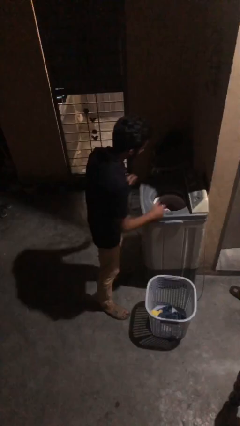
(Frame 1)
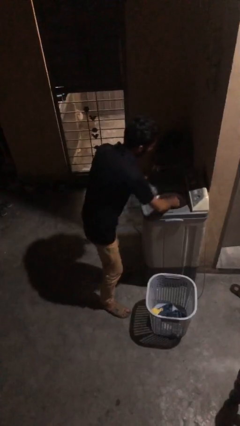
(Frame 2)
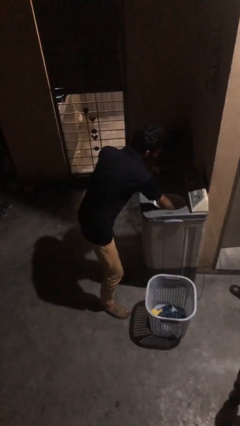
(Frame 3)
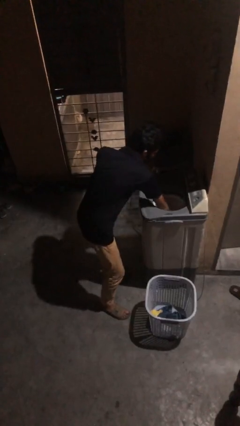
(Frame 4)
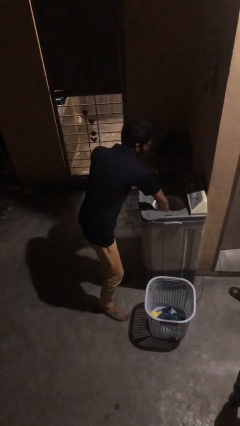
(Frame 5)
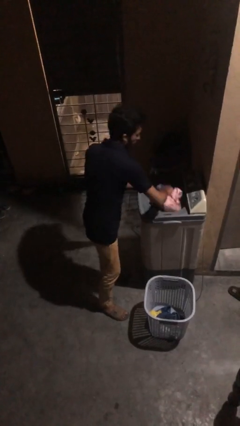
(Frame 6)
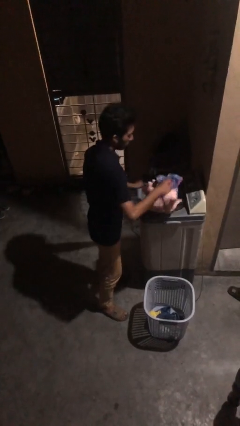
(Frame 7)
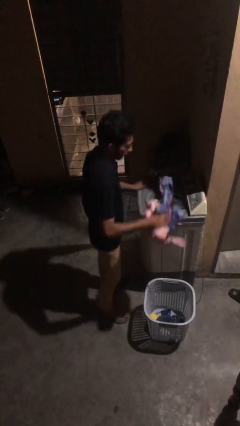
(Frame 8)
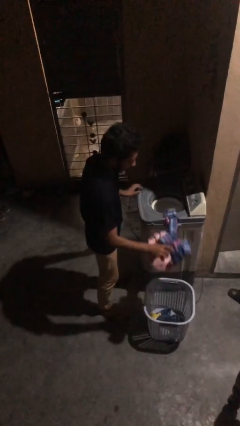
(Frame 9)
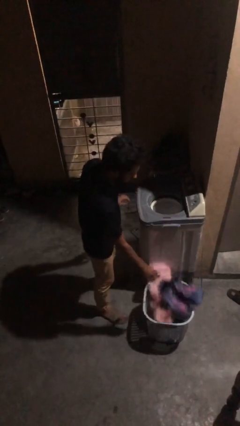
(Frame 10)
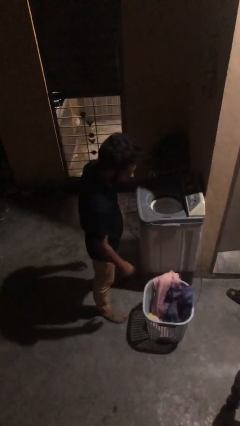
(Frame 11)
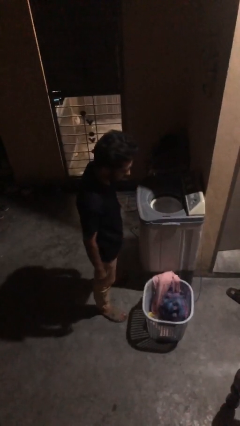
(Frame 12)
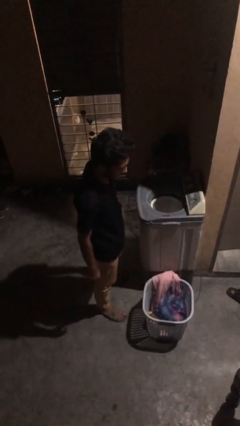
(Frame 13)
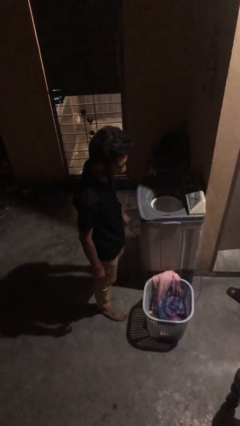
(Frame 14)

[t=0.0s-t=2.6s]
person unloads dryer

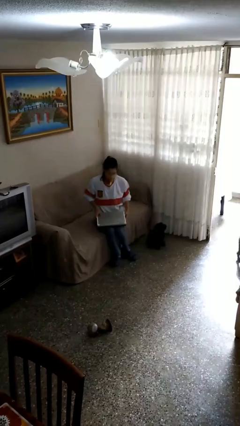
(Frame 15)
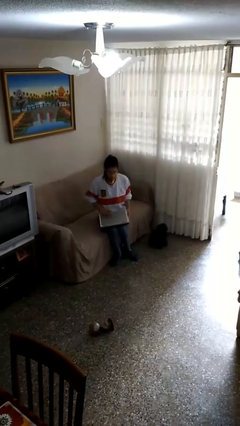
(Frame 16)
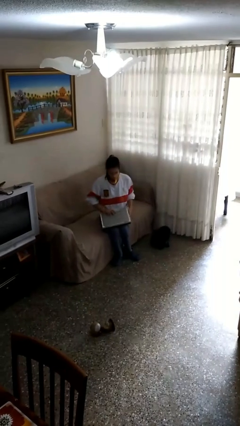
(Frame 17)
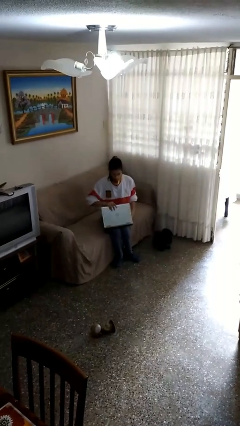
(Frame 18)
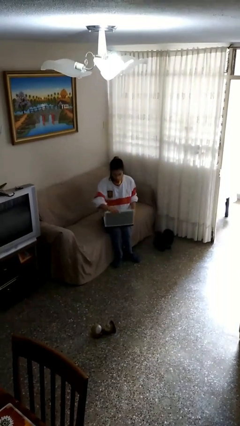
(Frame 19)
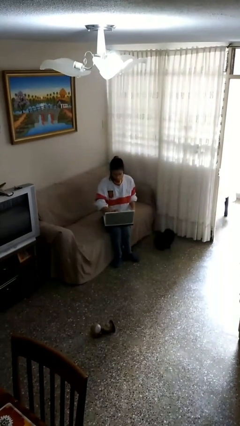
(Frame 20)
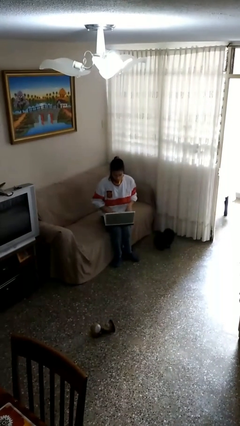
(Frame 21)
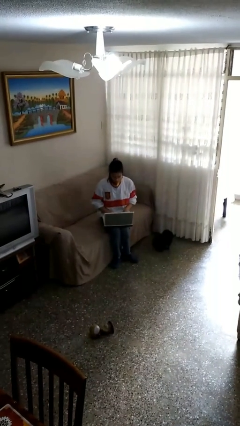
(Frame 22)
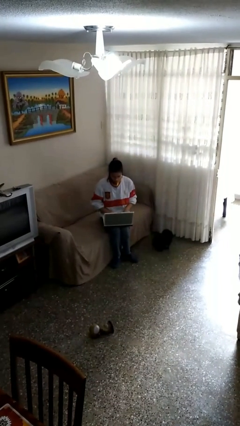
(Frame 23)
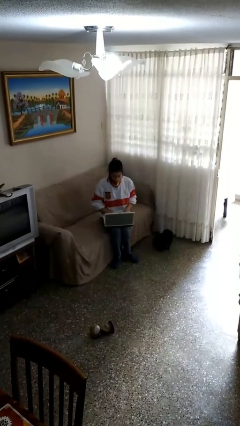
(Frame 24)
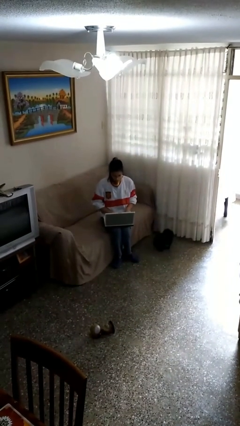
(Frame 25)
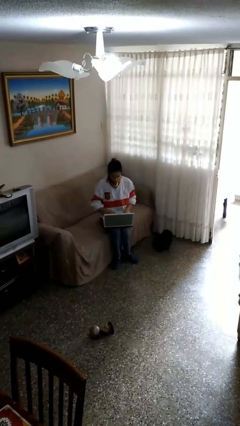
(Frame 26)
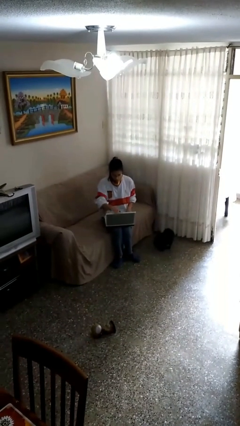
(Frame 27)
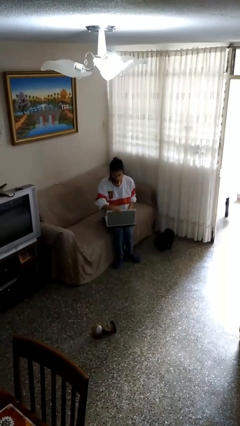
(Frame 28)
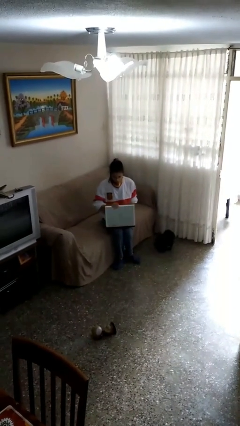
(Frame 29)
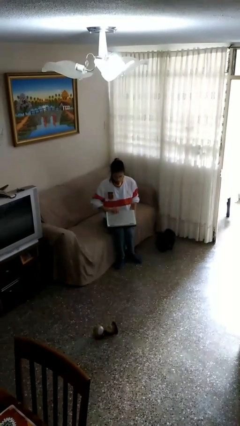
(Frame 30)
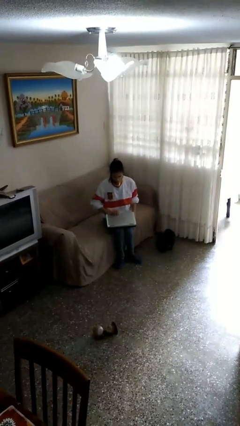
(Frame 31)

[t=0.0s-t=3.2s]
person interacts with laptop

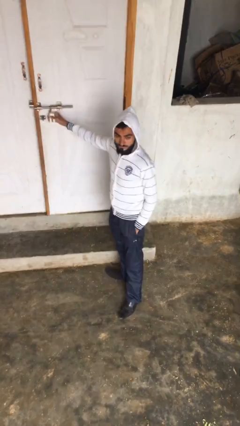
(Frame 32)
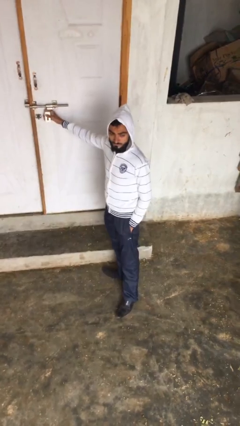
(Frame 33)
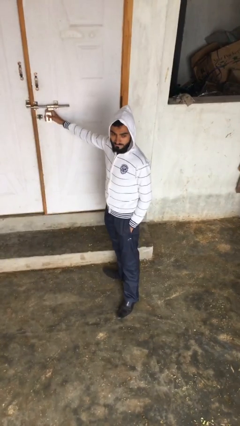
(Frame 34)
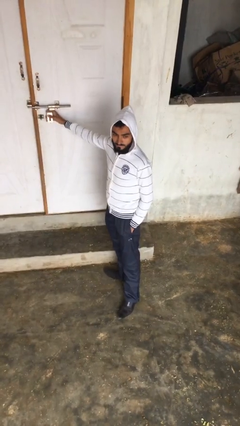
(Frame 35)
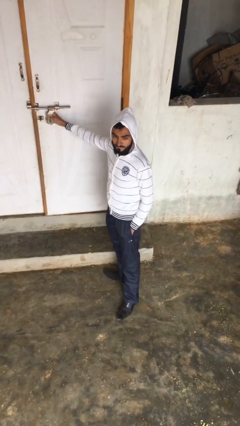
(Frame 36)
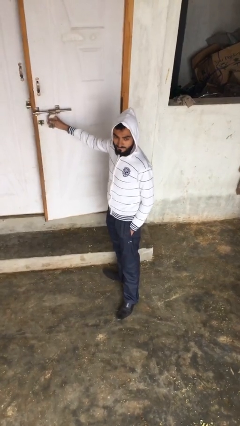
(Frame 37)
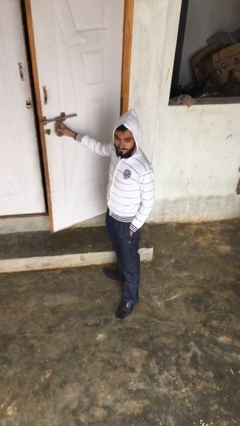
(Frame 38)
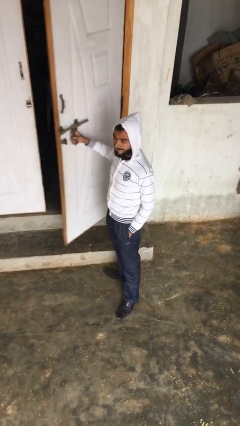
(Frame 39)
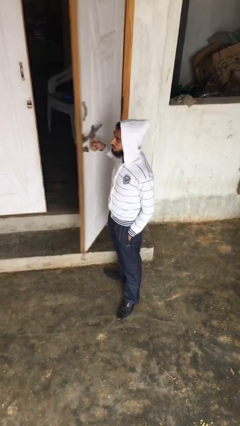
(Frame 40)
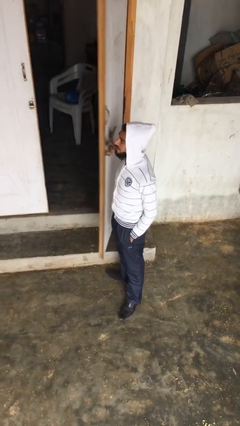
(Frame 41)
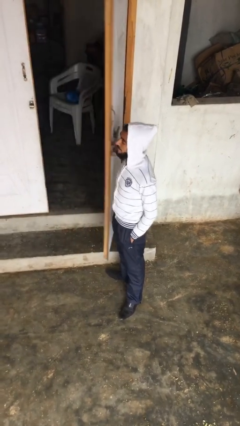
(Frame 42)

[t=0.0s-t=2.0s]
person opens facility door

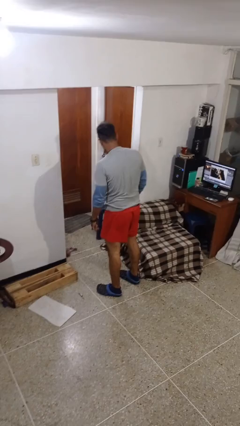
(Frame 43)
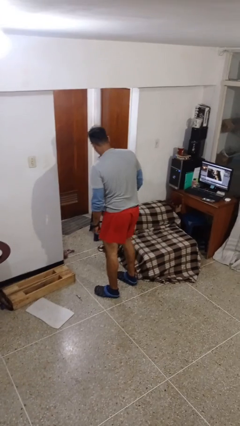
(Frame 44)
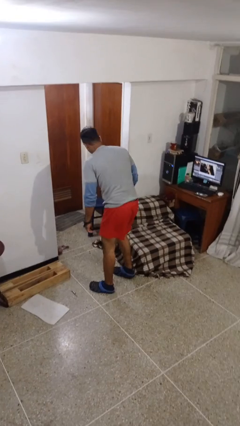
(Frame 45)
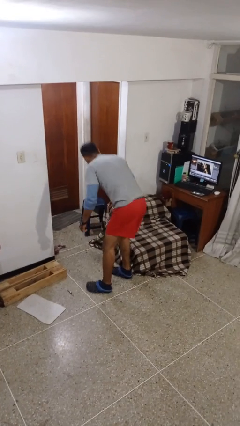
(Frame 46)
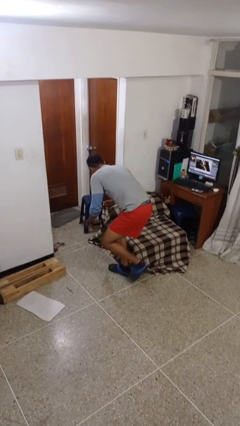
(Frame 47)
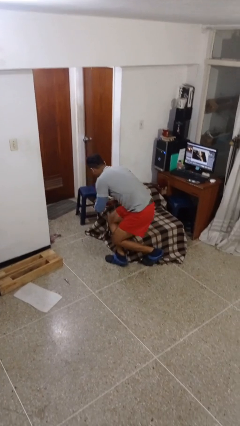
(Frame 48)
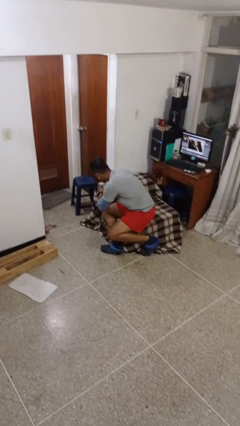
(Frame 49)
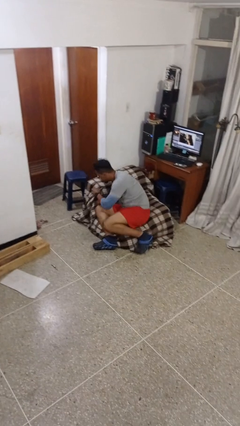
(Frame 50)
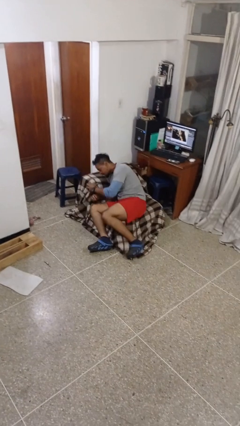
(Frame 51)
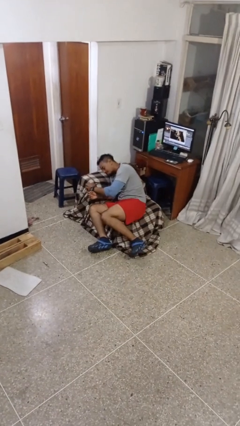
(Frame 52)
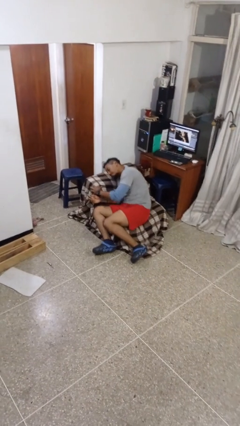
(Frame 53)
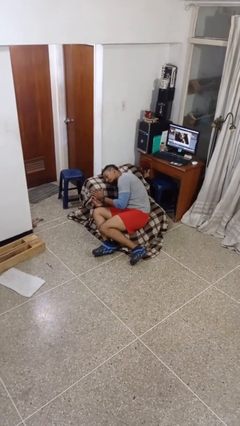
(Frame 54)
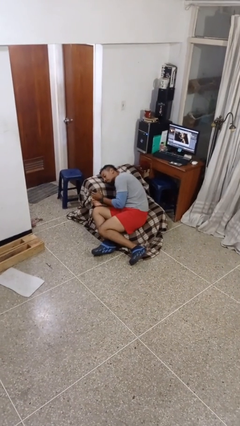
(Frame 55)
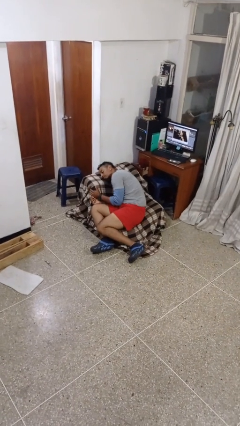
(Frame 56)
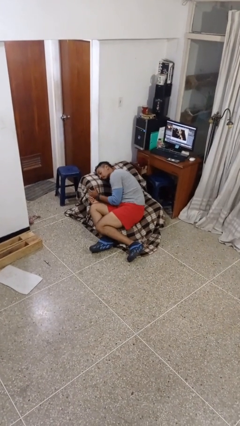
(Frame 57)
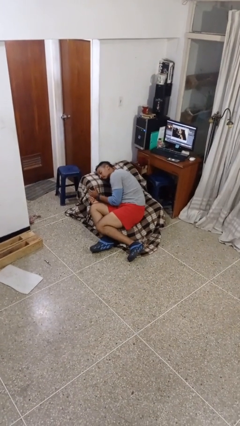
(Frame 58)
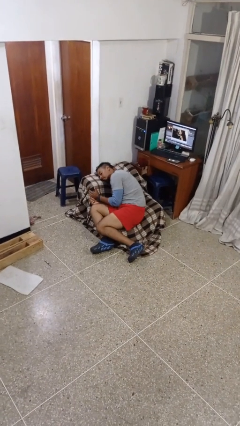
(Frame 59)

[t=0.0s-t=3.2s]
person lies down on couch

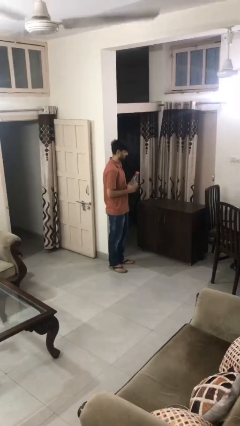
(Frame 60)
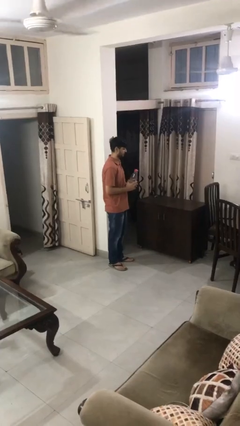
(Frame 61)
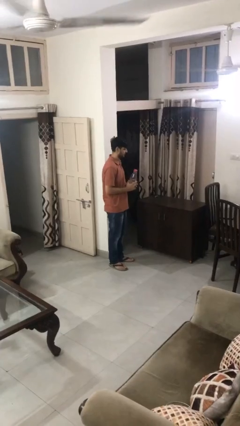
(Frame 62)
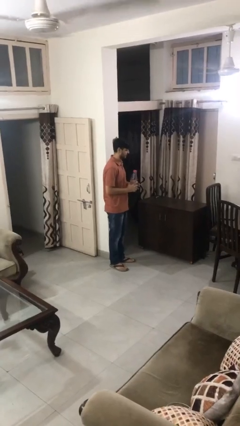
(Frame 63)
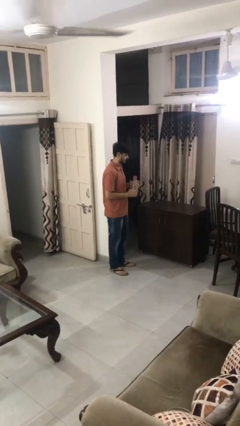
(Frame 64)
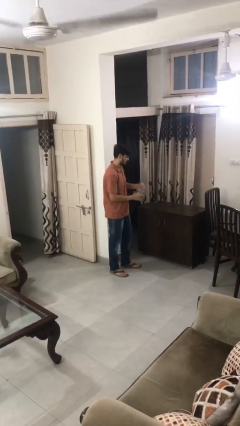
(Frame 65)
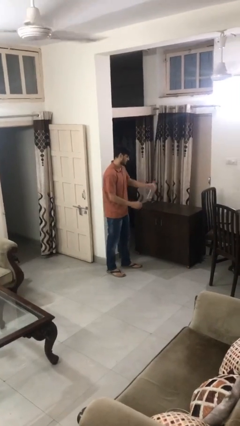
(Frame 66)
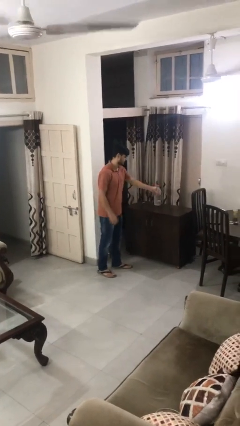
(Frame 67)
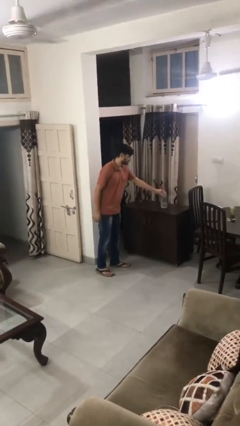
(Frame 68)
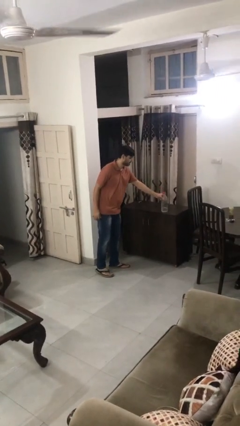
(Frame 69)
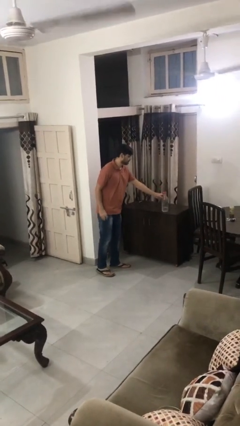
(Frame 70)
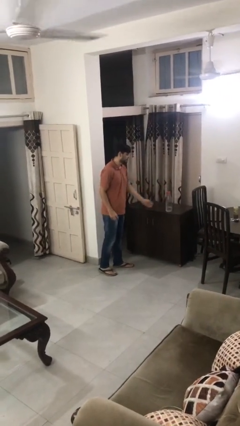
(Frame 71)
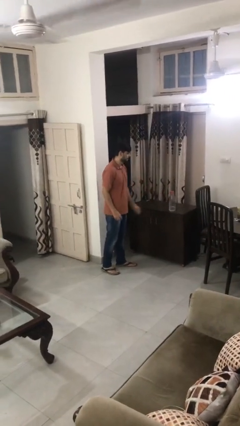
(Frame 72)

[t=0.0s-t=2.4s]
person puts down object on countertop

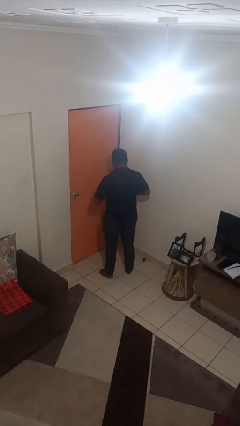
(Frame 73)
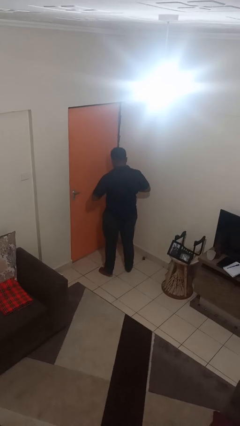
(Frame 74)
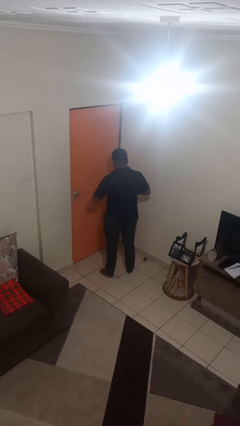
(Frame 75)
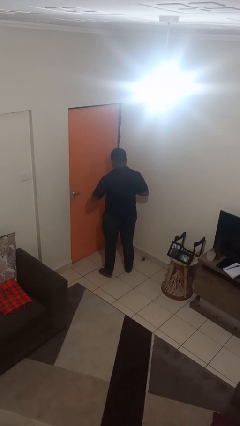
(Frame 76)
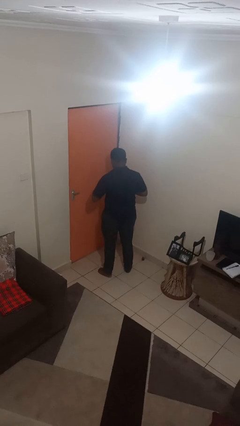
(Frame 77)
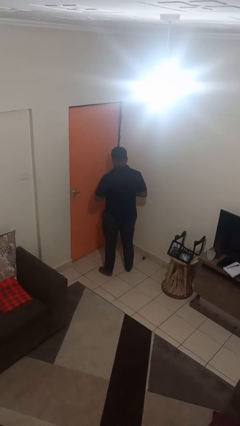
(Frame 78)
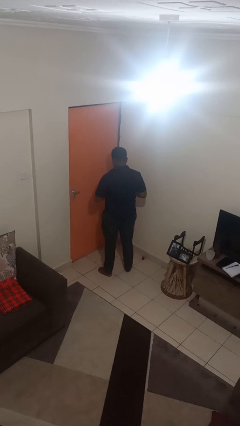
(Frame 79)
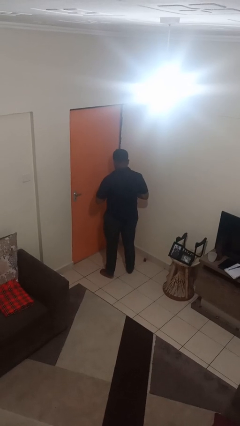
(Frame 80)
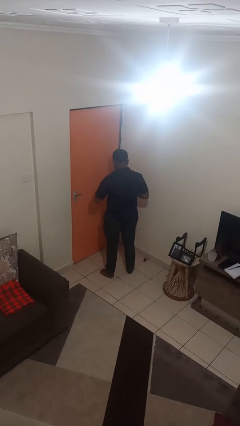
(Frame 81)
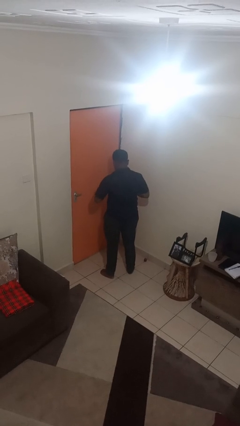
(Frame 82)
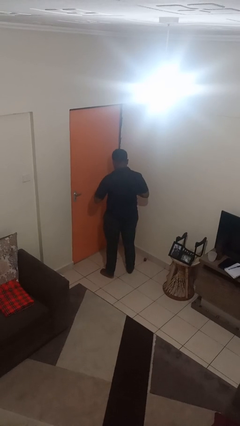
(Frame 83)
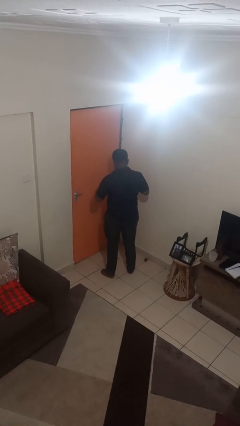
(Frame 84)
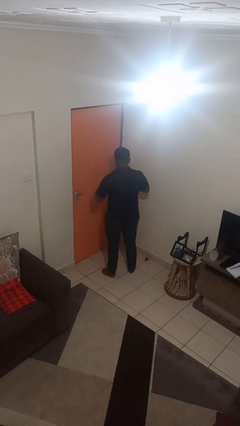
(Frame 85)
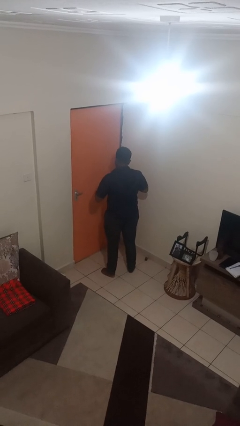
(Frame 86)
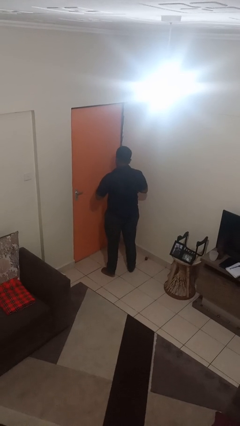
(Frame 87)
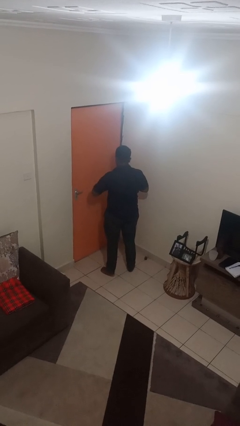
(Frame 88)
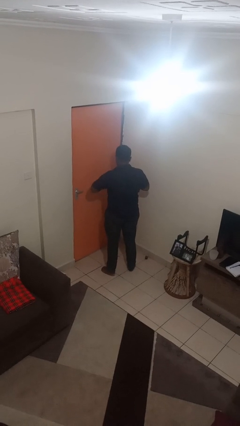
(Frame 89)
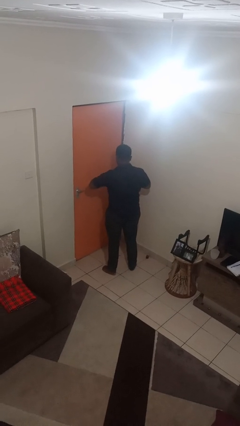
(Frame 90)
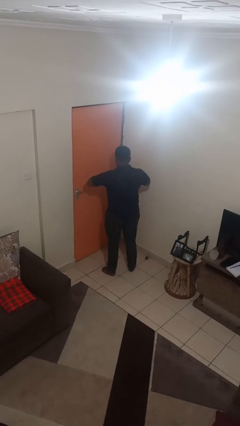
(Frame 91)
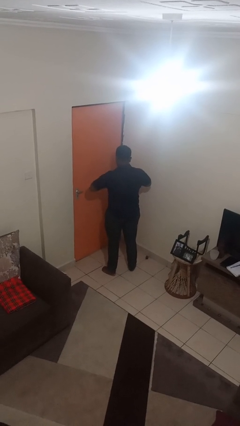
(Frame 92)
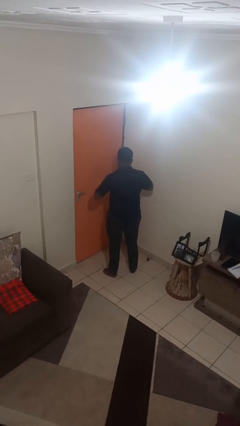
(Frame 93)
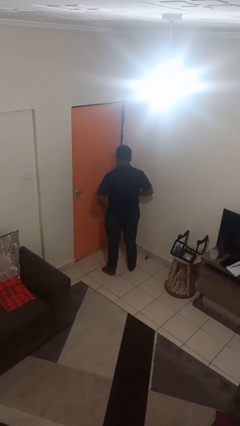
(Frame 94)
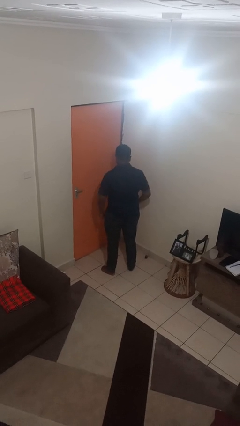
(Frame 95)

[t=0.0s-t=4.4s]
person buttons shirt
